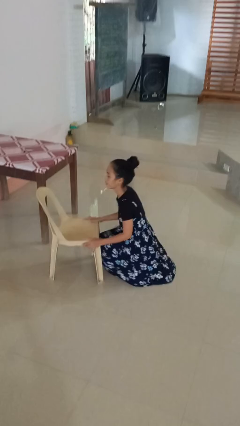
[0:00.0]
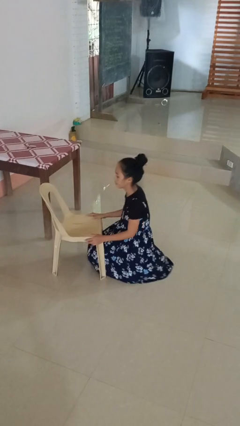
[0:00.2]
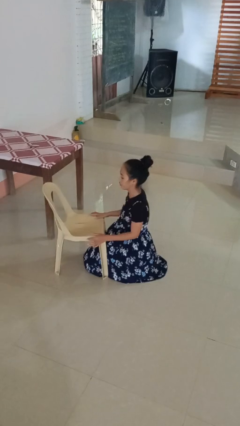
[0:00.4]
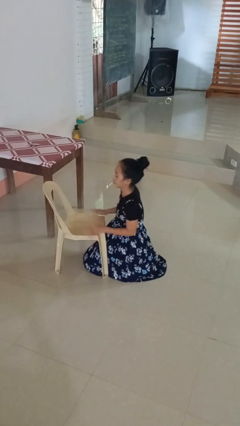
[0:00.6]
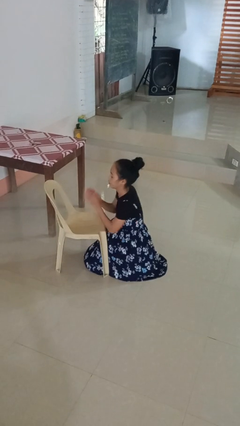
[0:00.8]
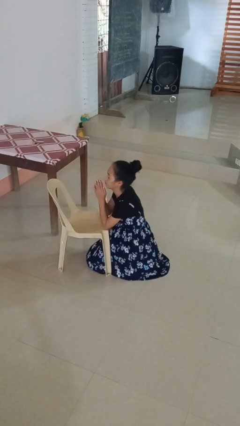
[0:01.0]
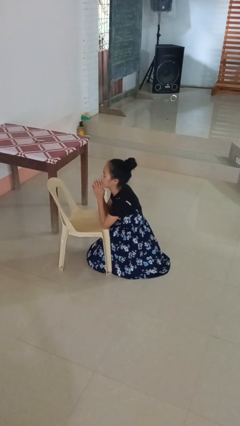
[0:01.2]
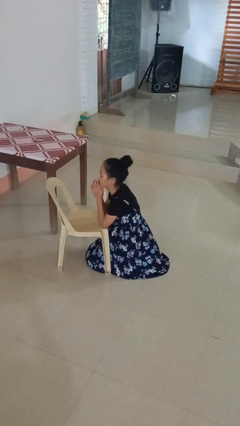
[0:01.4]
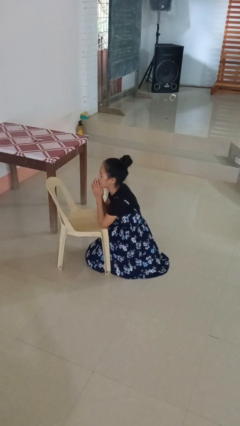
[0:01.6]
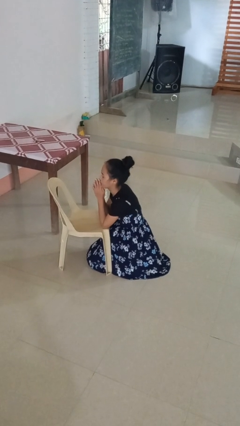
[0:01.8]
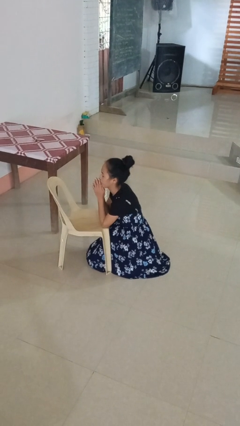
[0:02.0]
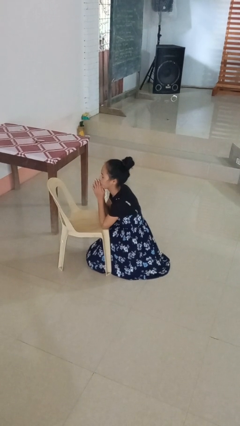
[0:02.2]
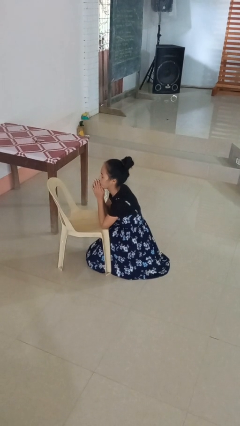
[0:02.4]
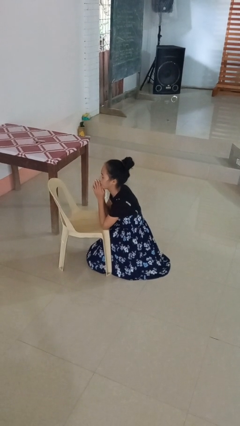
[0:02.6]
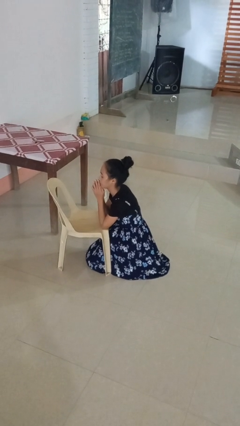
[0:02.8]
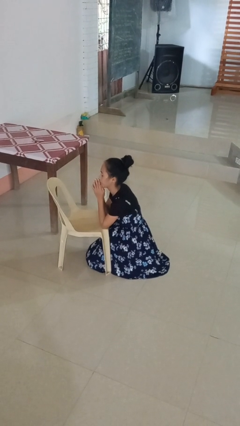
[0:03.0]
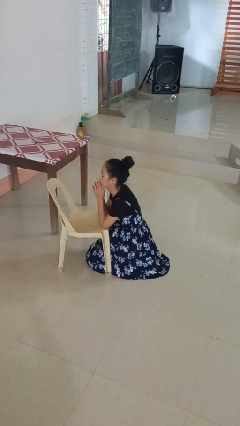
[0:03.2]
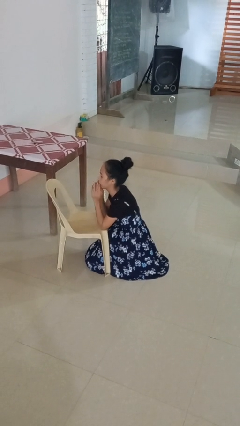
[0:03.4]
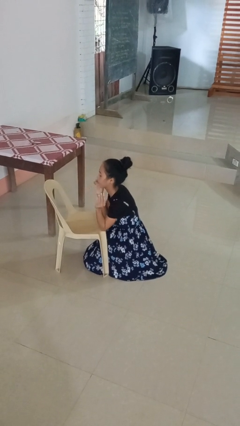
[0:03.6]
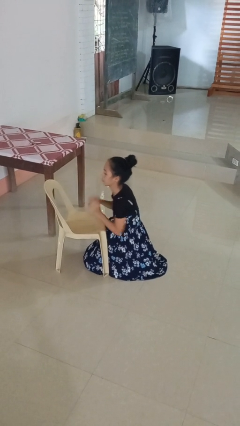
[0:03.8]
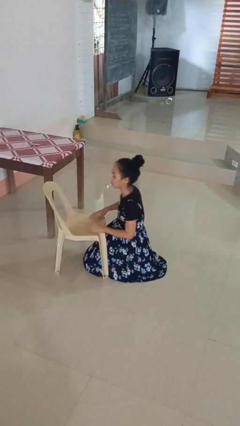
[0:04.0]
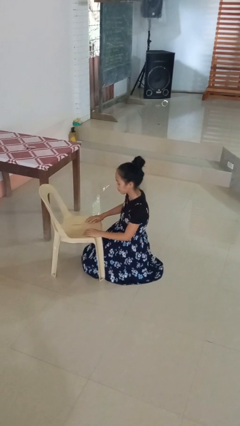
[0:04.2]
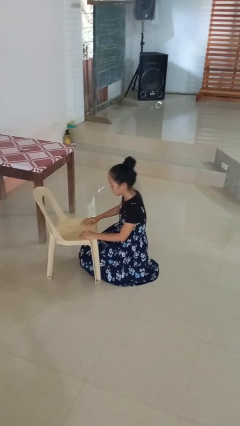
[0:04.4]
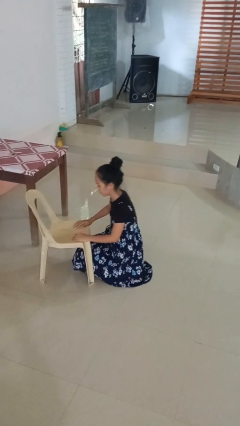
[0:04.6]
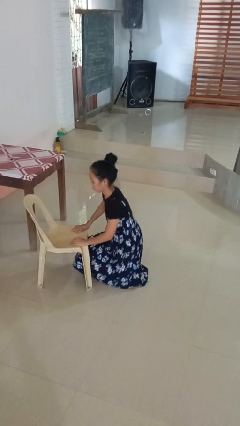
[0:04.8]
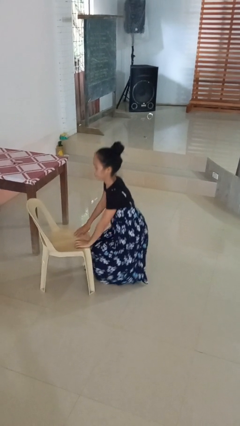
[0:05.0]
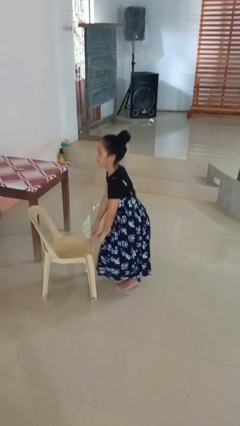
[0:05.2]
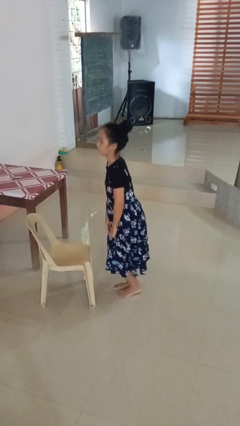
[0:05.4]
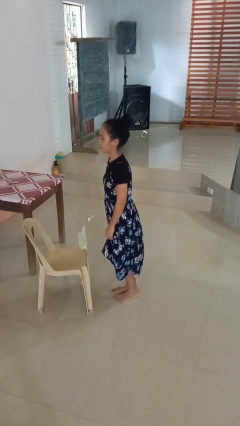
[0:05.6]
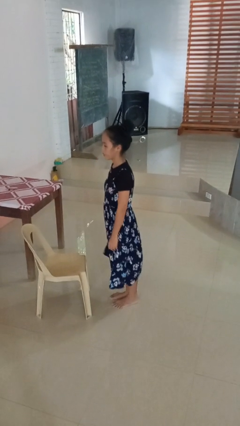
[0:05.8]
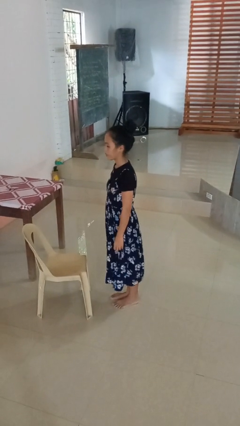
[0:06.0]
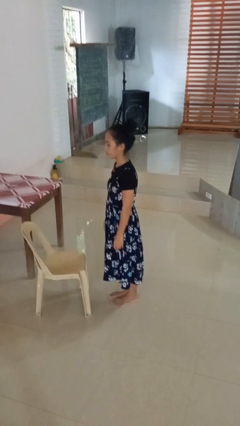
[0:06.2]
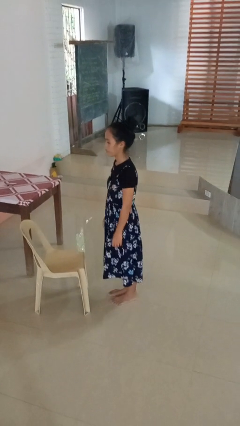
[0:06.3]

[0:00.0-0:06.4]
person prays

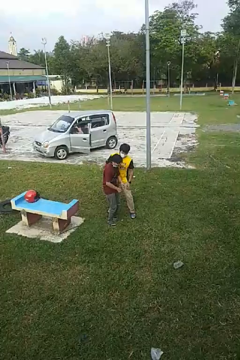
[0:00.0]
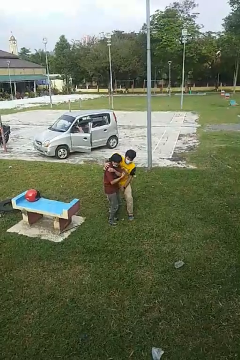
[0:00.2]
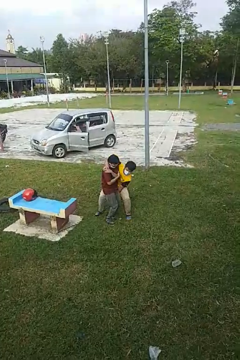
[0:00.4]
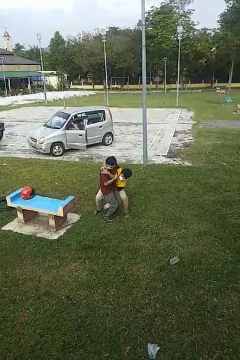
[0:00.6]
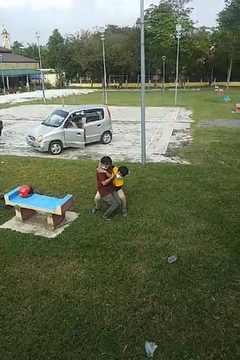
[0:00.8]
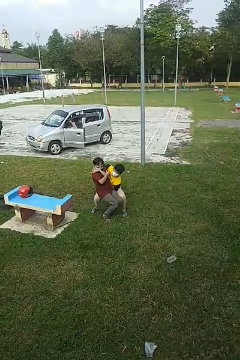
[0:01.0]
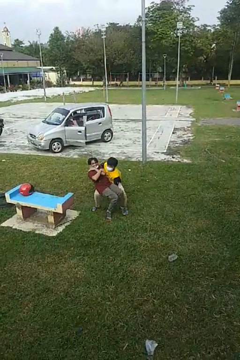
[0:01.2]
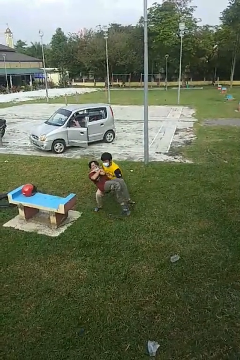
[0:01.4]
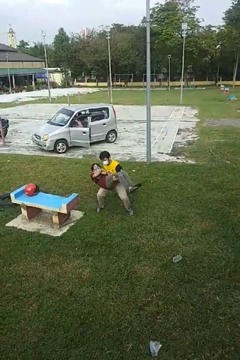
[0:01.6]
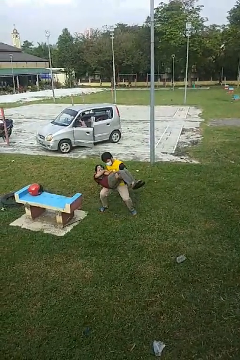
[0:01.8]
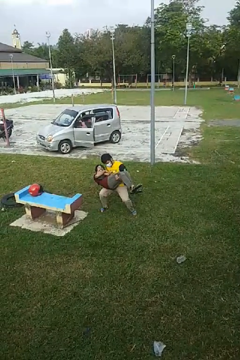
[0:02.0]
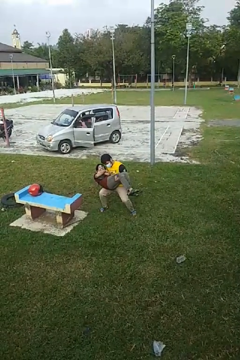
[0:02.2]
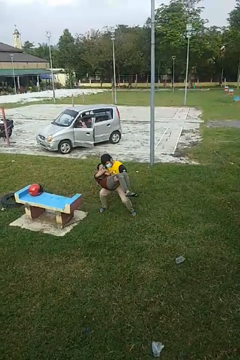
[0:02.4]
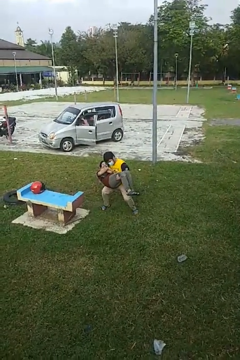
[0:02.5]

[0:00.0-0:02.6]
person picks up person

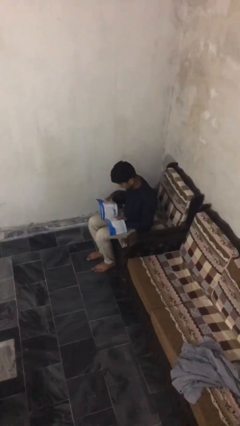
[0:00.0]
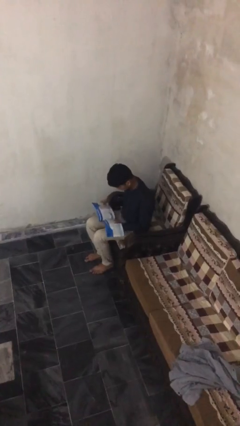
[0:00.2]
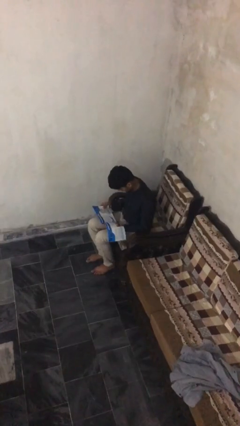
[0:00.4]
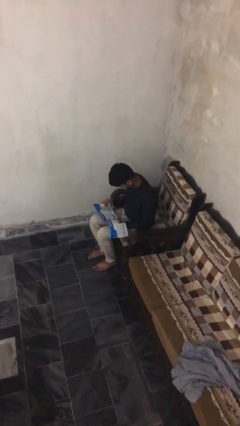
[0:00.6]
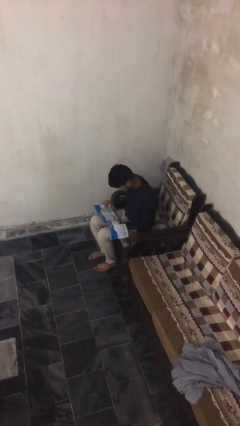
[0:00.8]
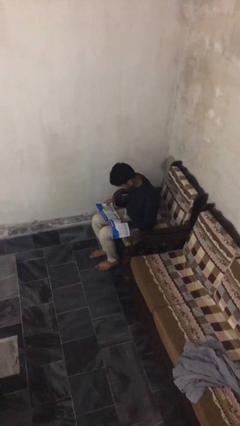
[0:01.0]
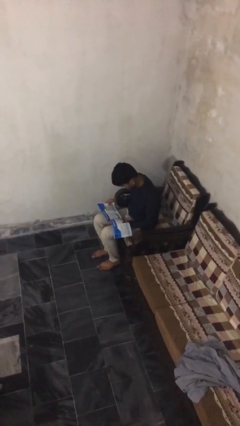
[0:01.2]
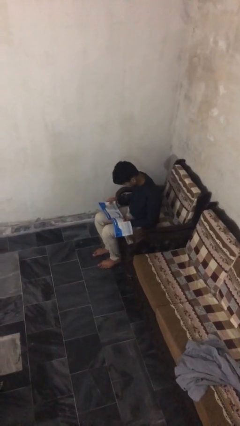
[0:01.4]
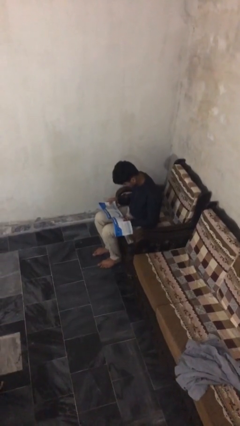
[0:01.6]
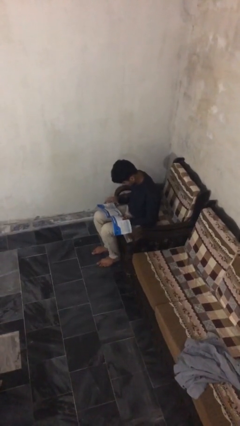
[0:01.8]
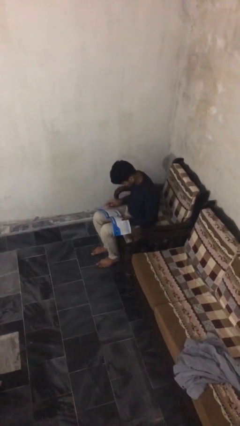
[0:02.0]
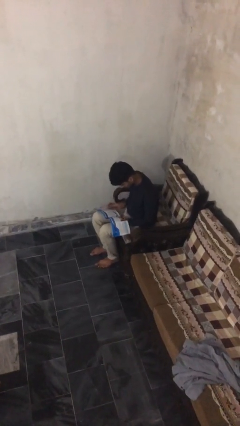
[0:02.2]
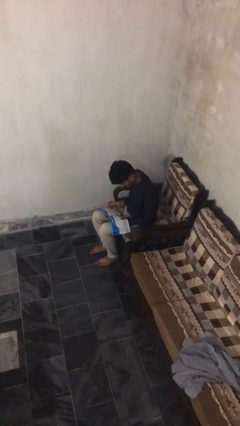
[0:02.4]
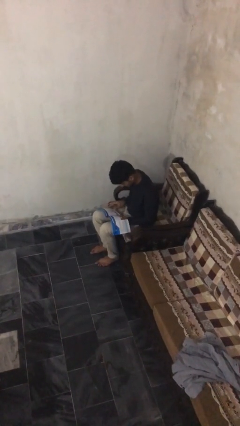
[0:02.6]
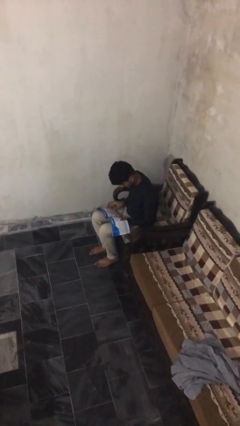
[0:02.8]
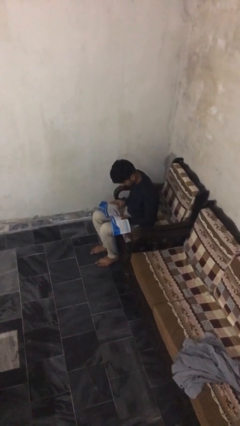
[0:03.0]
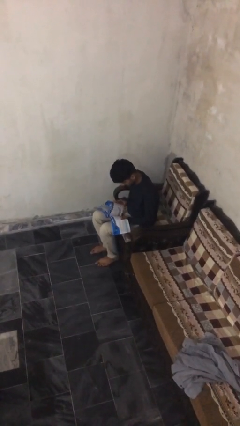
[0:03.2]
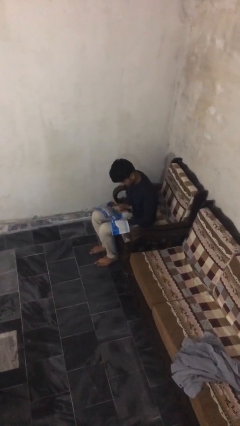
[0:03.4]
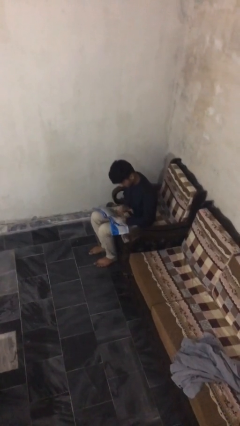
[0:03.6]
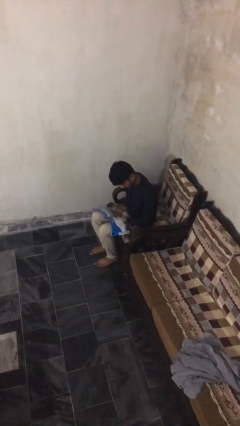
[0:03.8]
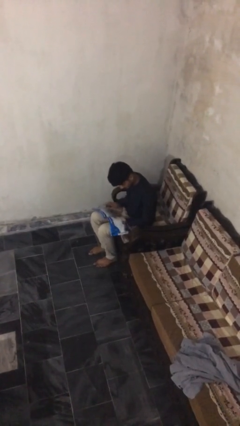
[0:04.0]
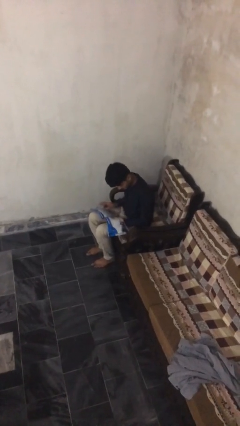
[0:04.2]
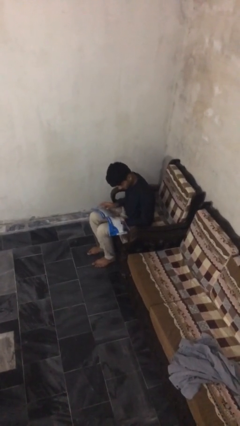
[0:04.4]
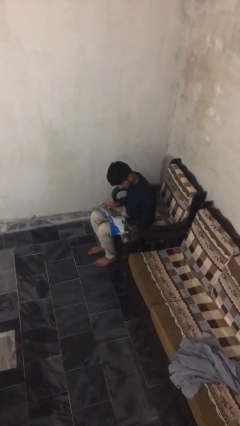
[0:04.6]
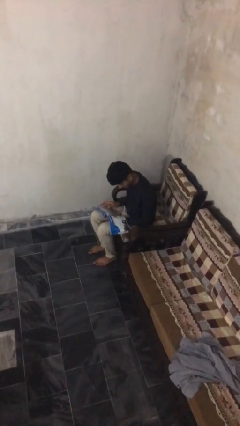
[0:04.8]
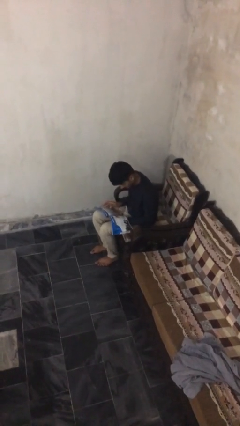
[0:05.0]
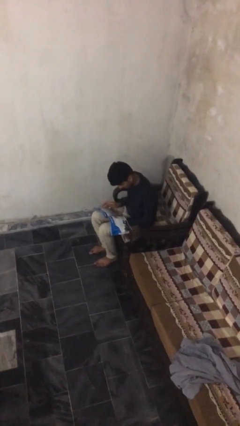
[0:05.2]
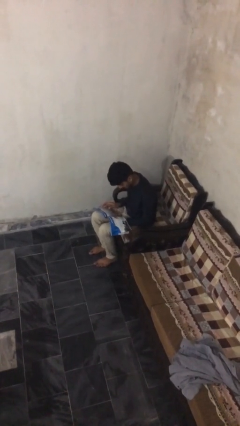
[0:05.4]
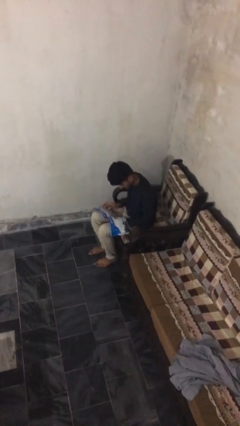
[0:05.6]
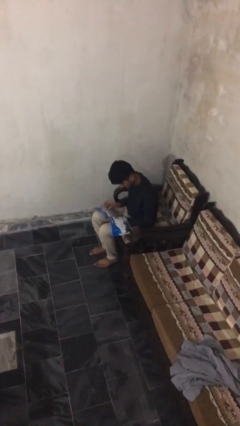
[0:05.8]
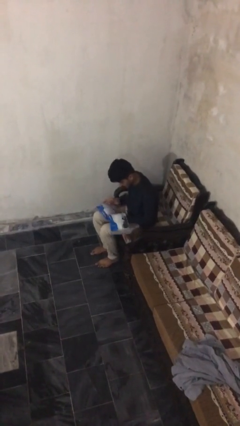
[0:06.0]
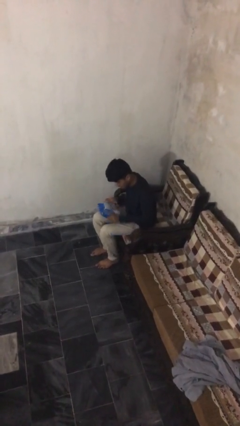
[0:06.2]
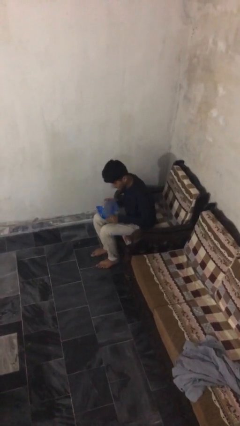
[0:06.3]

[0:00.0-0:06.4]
person reads document

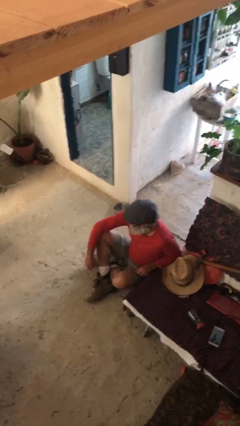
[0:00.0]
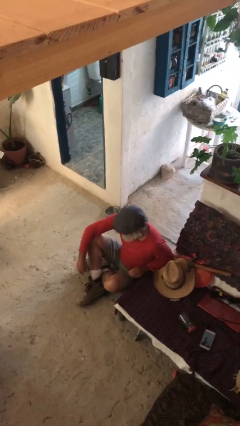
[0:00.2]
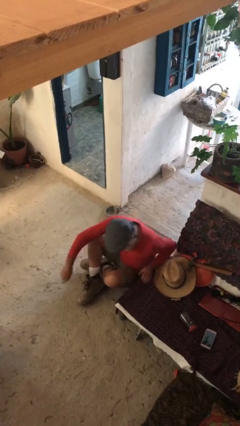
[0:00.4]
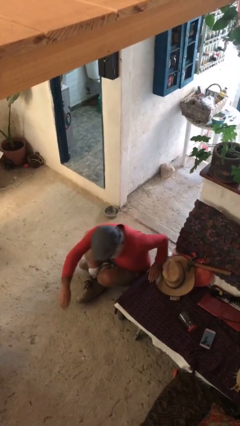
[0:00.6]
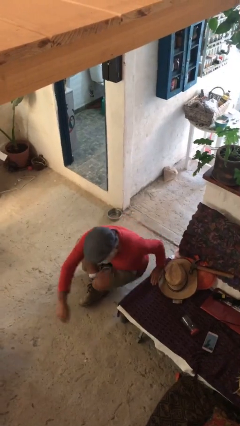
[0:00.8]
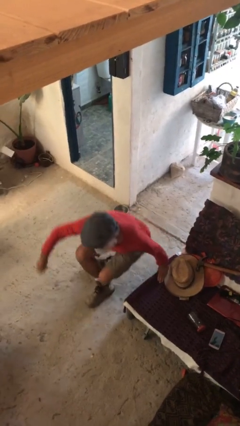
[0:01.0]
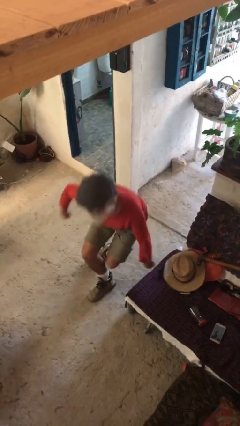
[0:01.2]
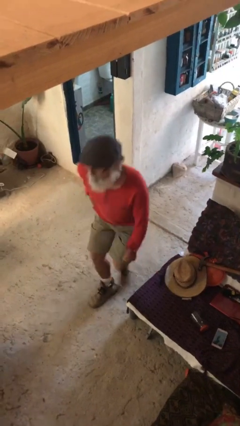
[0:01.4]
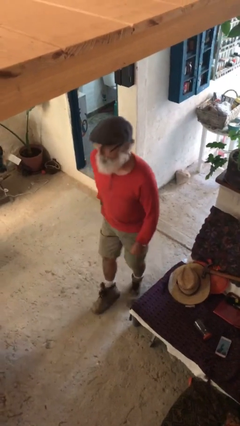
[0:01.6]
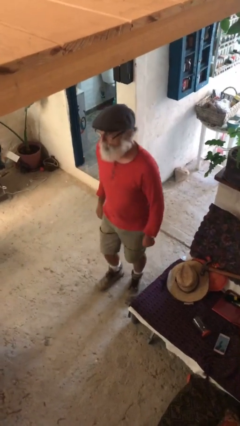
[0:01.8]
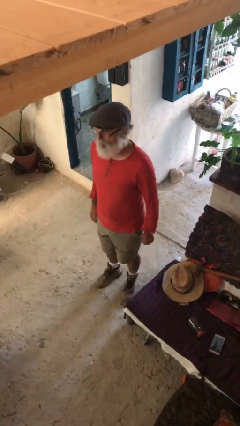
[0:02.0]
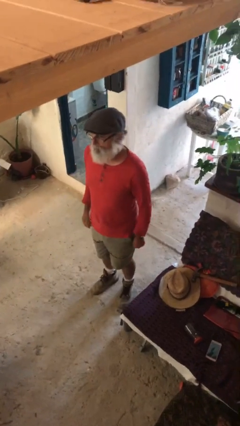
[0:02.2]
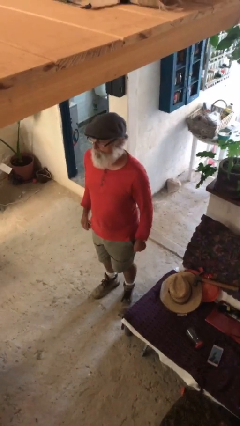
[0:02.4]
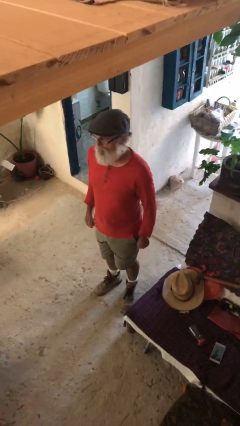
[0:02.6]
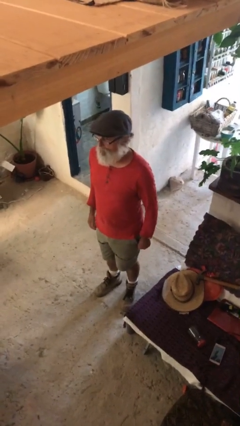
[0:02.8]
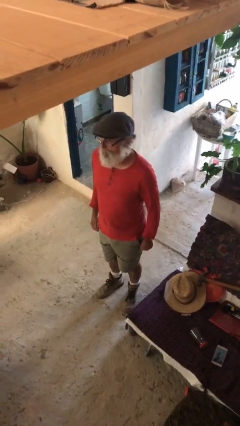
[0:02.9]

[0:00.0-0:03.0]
person stands up
